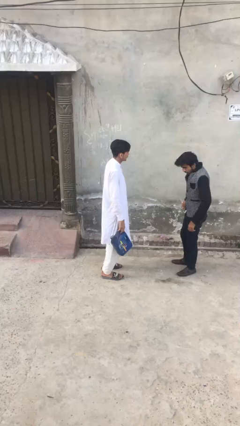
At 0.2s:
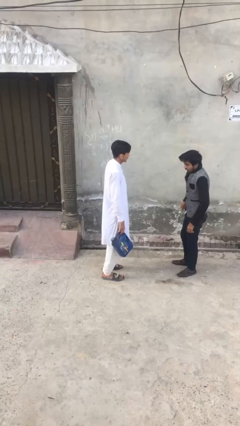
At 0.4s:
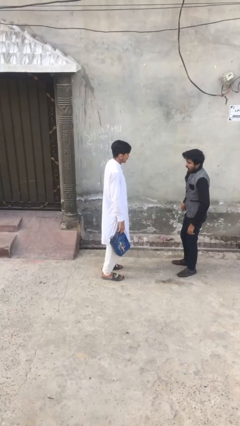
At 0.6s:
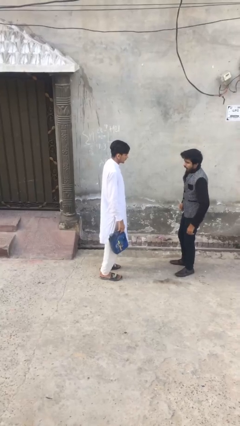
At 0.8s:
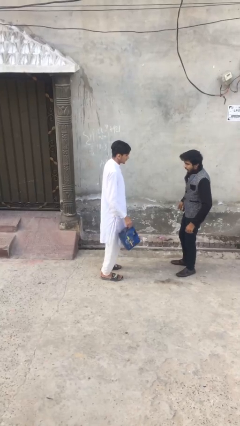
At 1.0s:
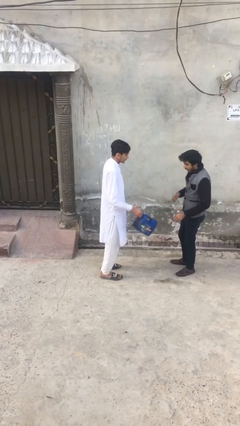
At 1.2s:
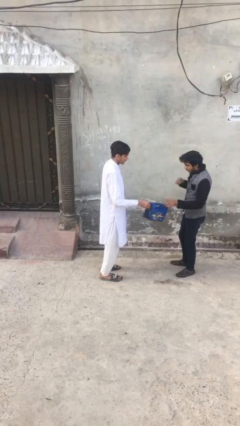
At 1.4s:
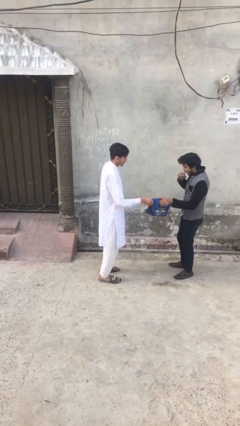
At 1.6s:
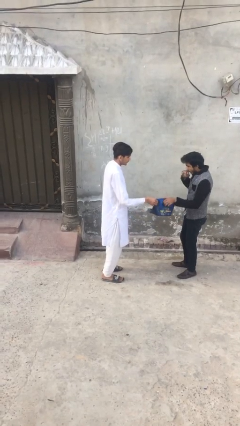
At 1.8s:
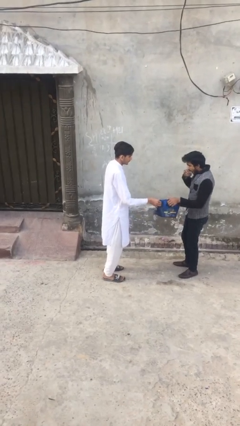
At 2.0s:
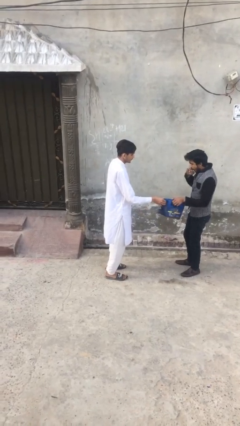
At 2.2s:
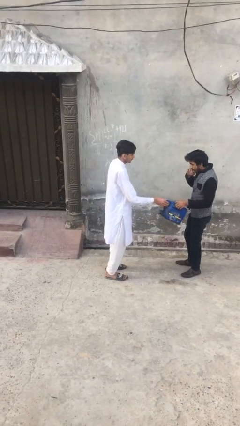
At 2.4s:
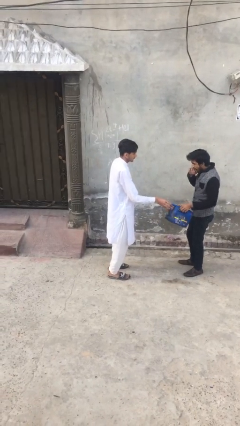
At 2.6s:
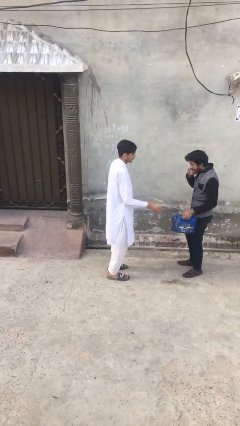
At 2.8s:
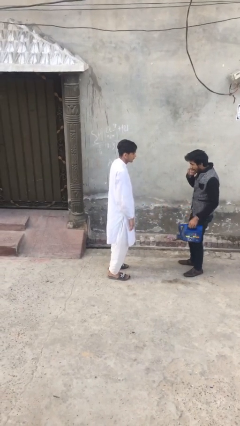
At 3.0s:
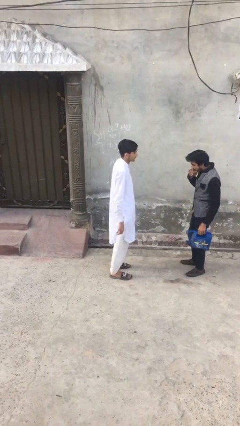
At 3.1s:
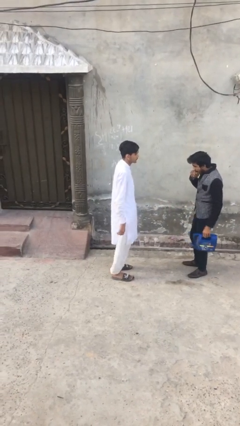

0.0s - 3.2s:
person transfers object to person

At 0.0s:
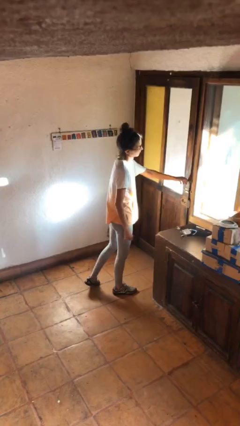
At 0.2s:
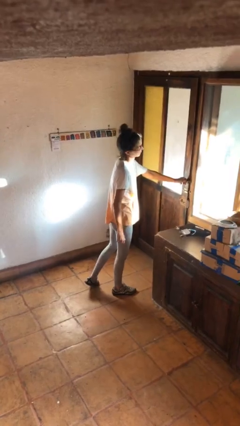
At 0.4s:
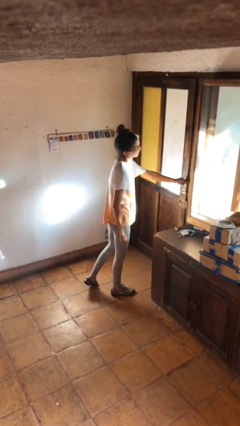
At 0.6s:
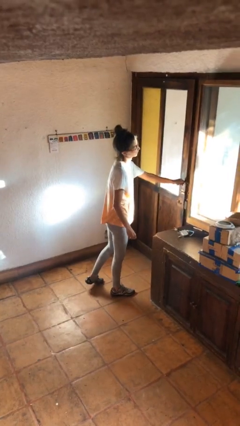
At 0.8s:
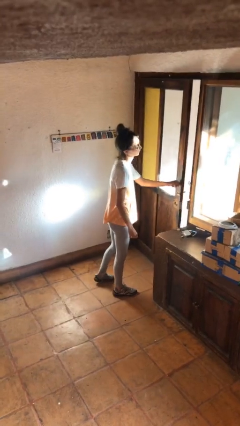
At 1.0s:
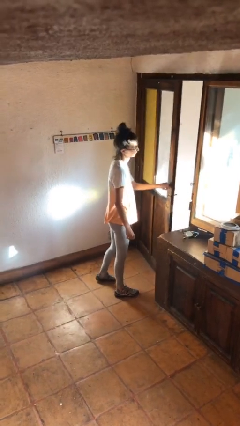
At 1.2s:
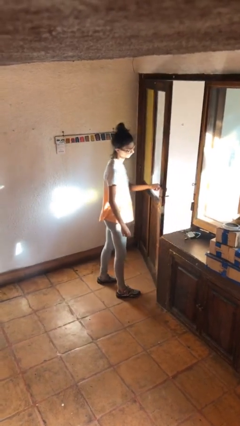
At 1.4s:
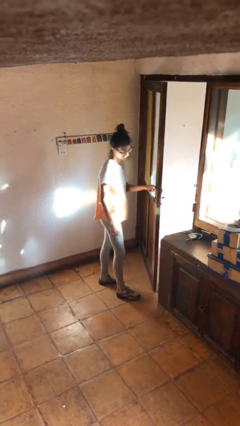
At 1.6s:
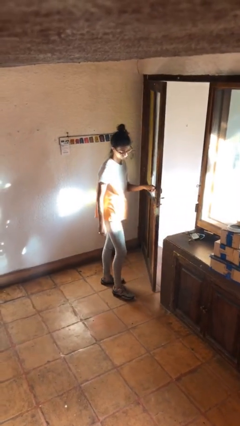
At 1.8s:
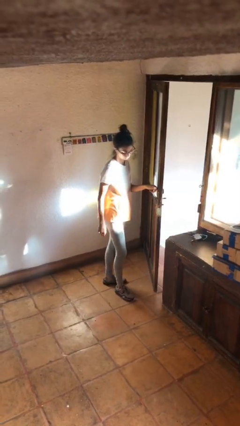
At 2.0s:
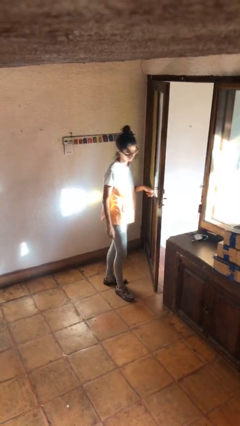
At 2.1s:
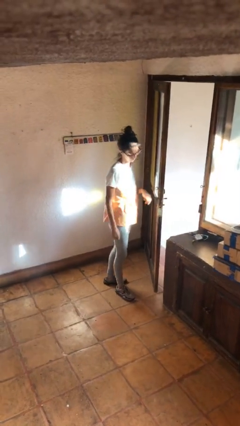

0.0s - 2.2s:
person opens facility door

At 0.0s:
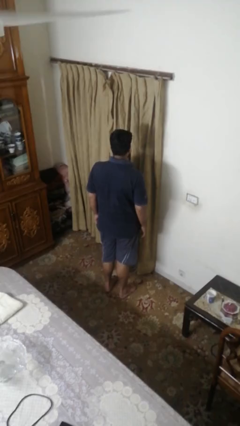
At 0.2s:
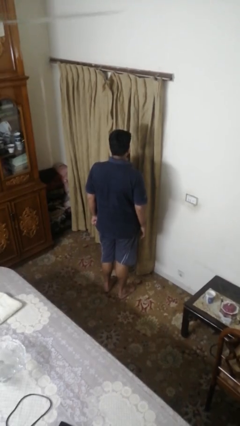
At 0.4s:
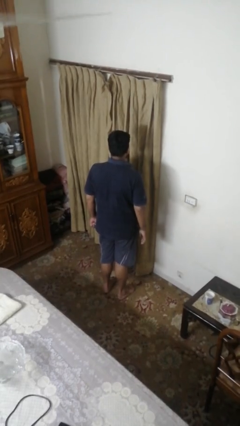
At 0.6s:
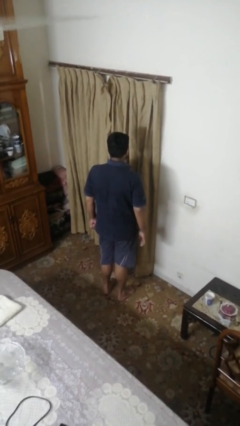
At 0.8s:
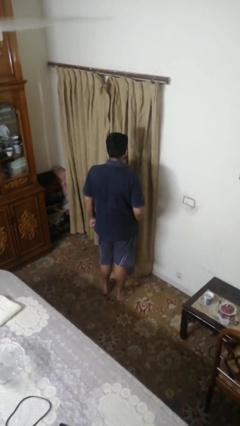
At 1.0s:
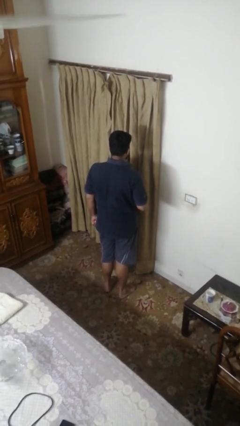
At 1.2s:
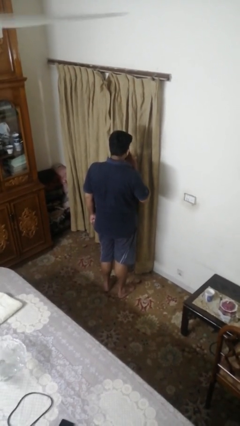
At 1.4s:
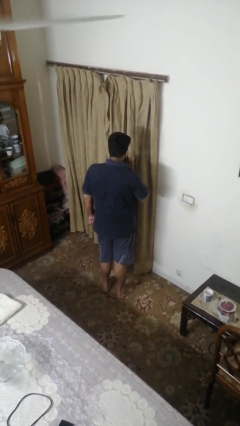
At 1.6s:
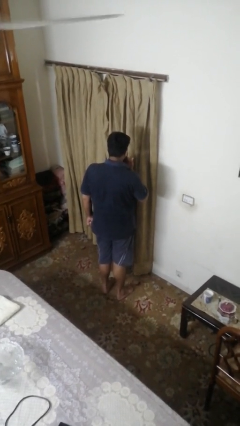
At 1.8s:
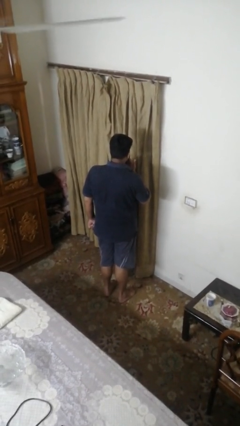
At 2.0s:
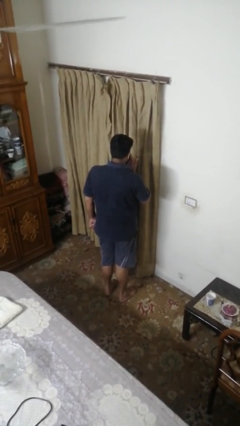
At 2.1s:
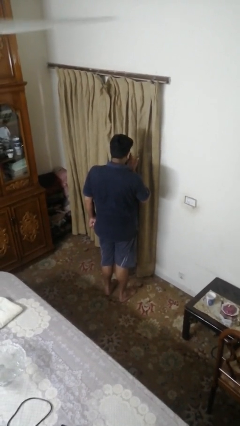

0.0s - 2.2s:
person gestures blow kiss

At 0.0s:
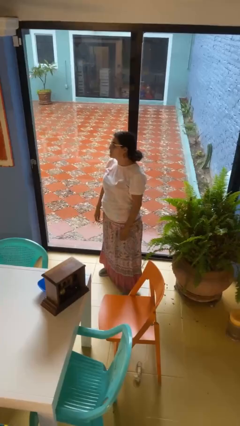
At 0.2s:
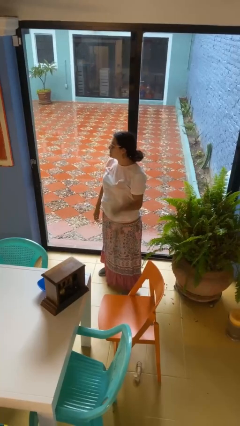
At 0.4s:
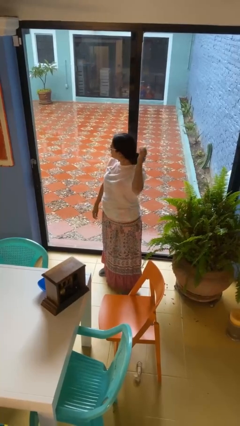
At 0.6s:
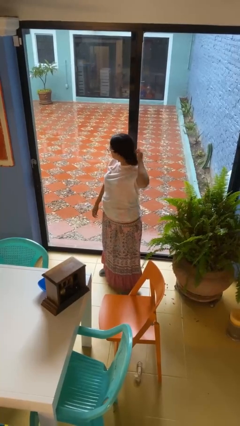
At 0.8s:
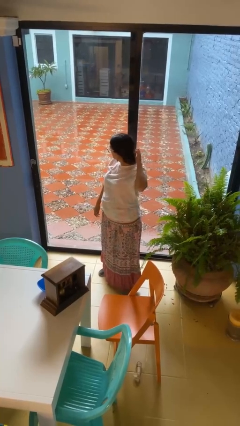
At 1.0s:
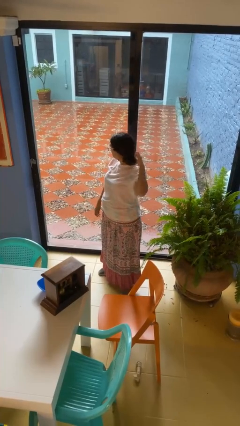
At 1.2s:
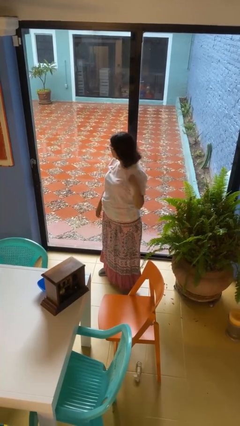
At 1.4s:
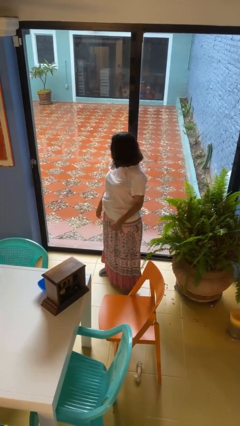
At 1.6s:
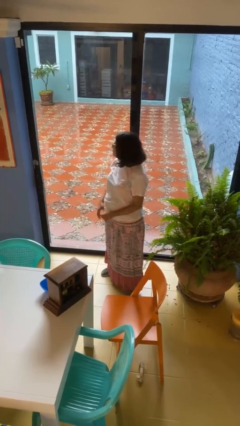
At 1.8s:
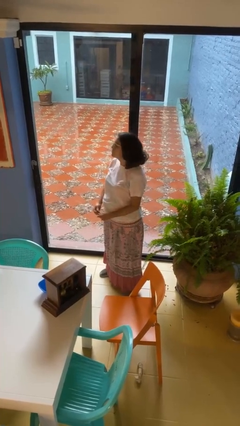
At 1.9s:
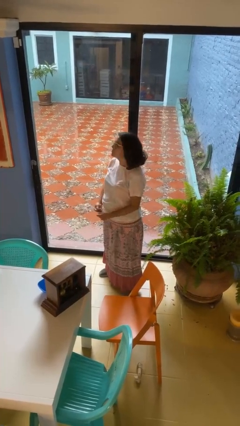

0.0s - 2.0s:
person takes off hairtie

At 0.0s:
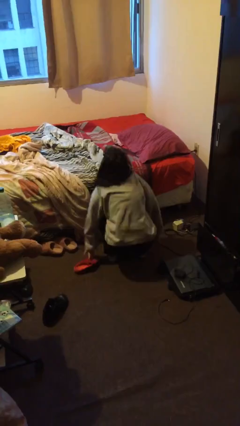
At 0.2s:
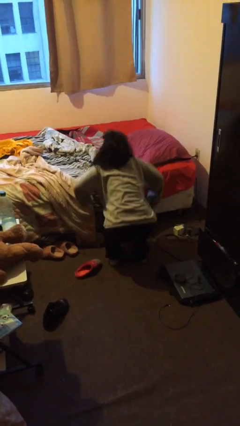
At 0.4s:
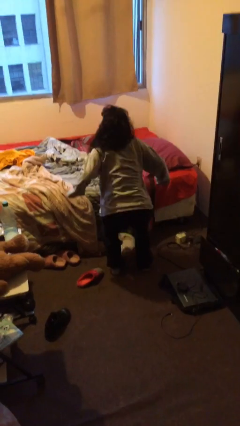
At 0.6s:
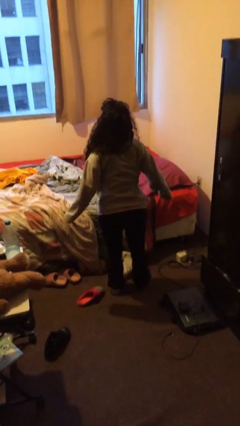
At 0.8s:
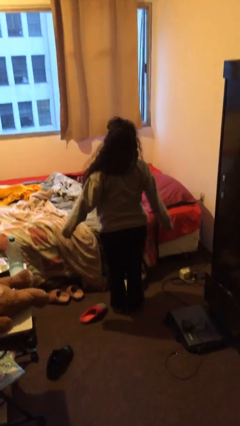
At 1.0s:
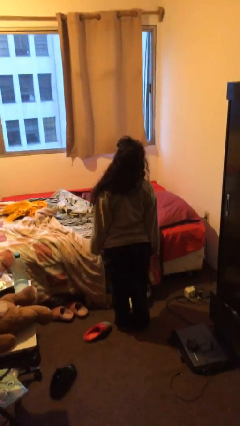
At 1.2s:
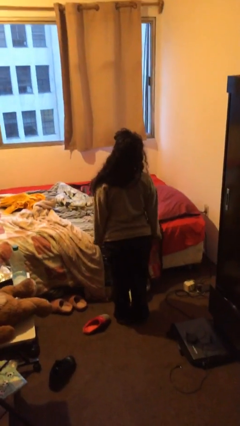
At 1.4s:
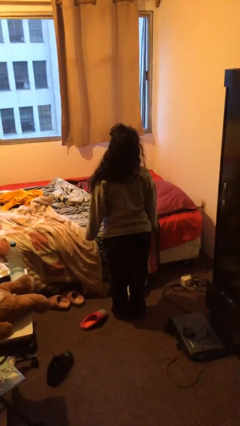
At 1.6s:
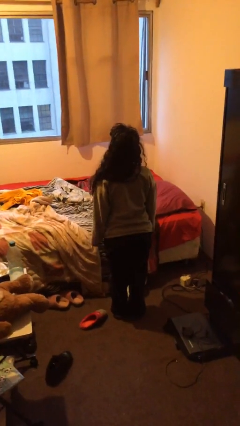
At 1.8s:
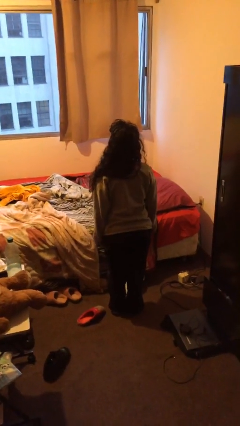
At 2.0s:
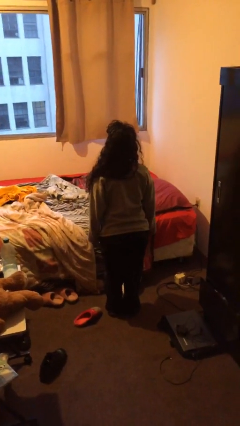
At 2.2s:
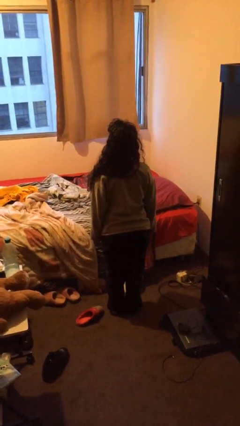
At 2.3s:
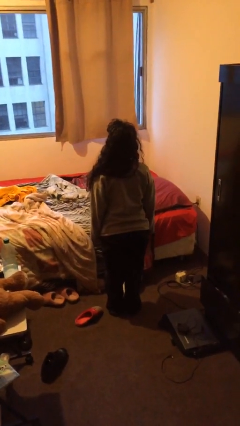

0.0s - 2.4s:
person stands up from floor

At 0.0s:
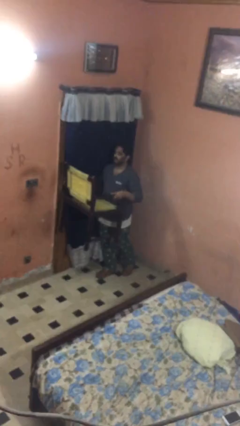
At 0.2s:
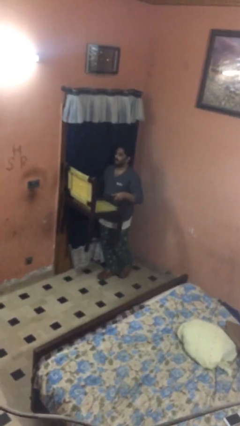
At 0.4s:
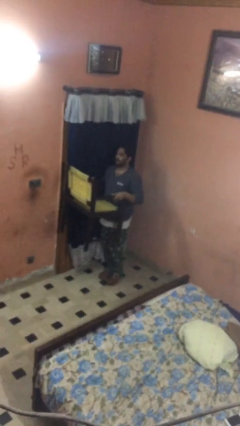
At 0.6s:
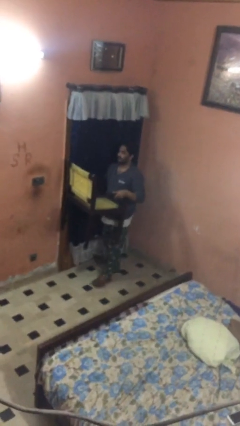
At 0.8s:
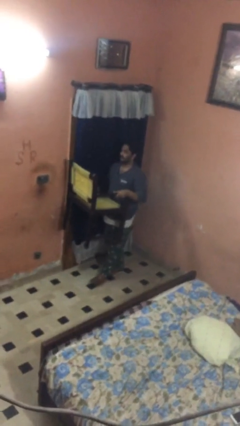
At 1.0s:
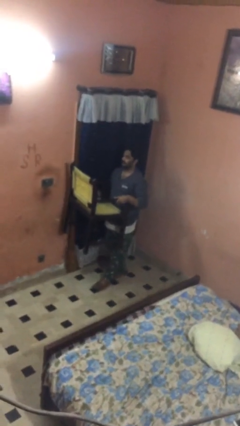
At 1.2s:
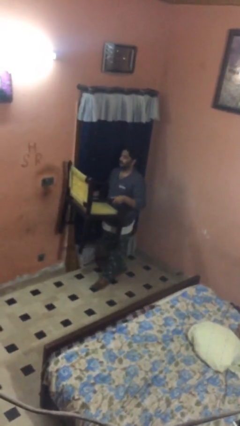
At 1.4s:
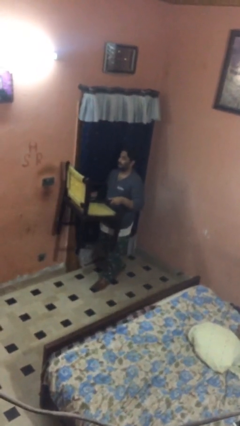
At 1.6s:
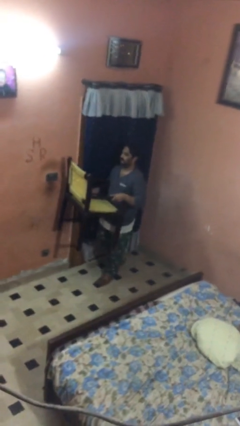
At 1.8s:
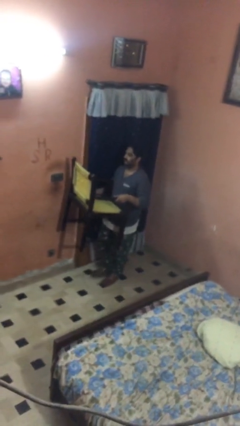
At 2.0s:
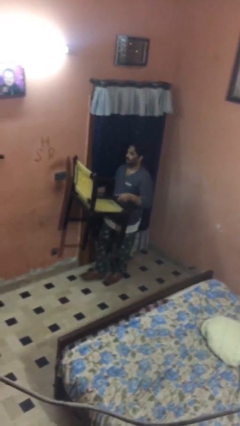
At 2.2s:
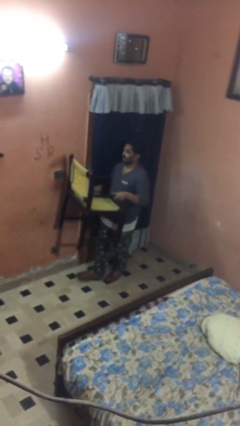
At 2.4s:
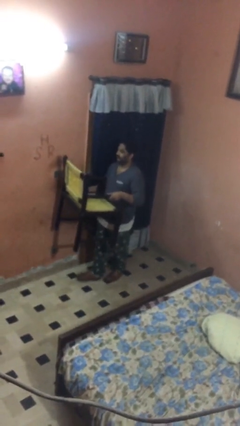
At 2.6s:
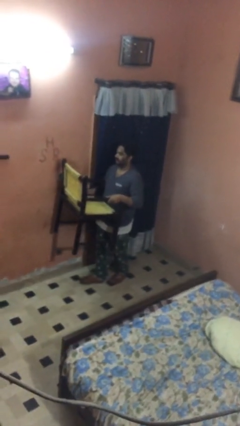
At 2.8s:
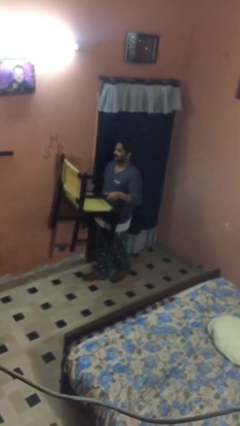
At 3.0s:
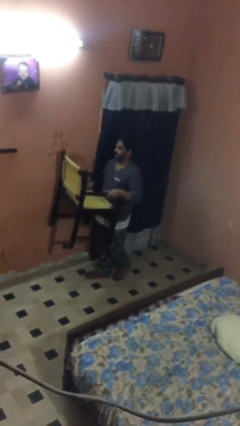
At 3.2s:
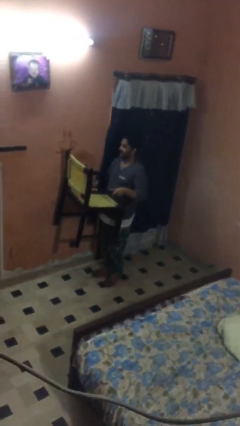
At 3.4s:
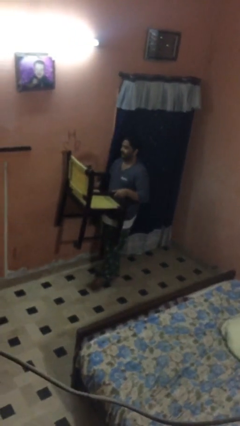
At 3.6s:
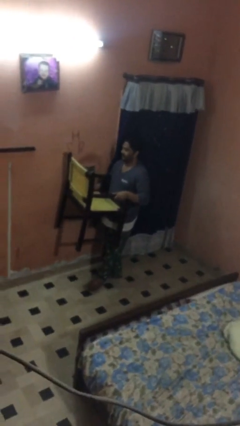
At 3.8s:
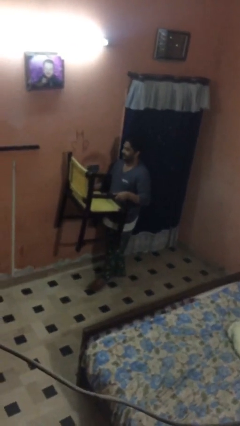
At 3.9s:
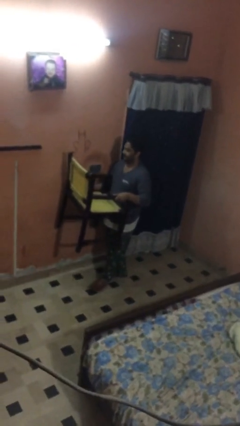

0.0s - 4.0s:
person carries heavy object

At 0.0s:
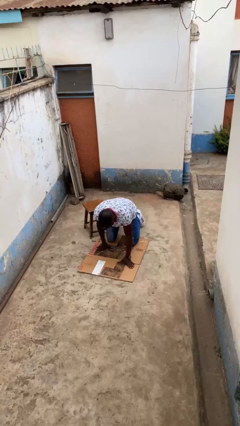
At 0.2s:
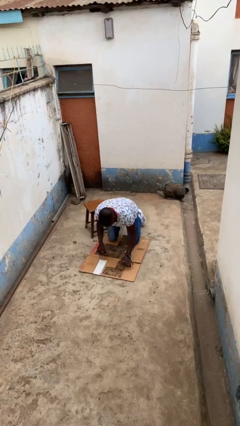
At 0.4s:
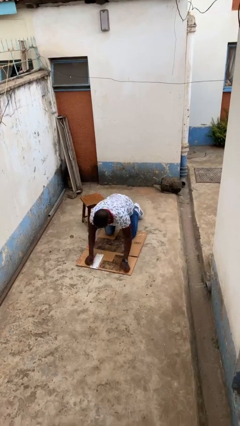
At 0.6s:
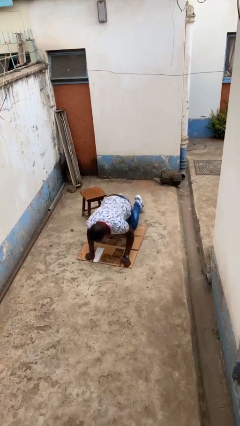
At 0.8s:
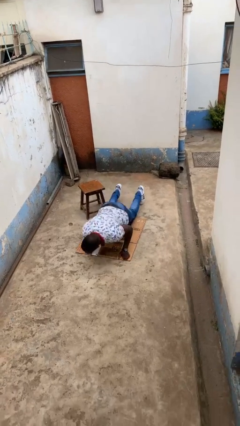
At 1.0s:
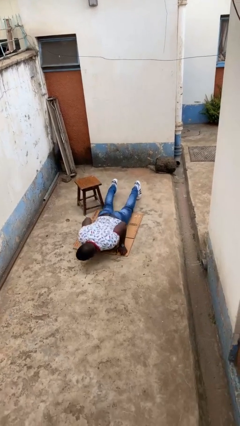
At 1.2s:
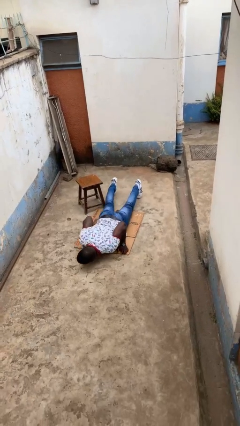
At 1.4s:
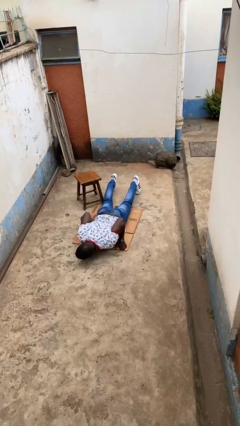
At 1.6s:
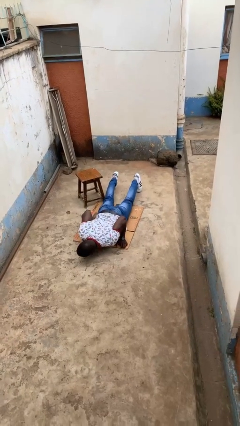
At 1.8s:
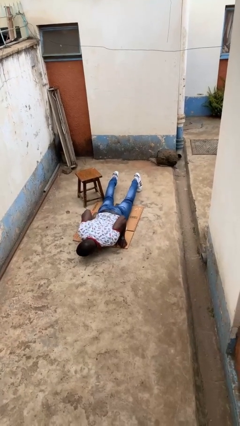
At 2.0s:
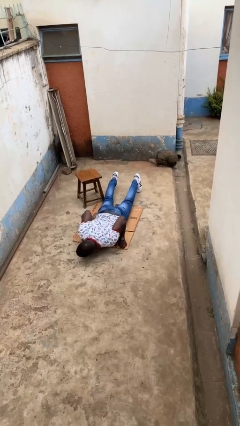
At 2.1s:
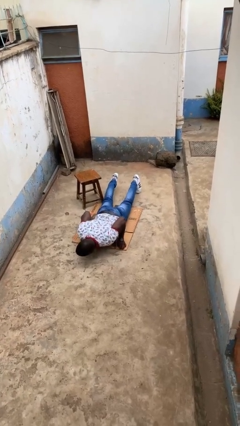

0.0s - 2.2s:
person lies down on floor
